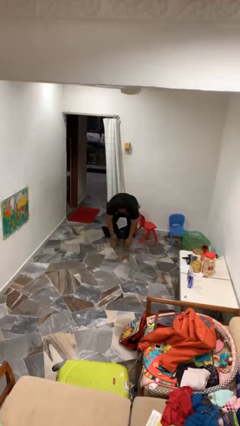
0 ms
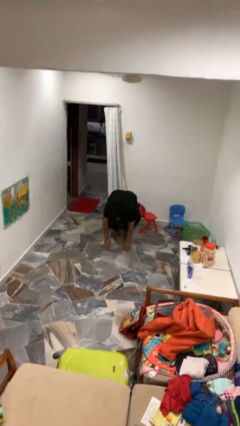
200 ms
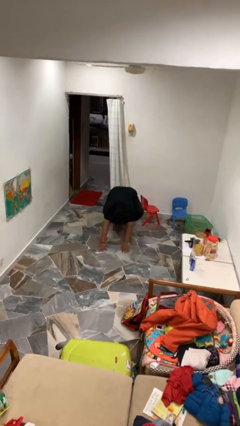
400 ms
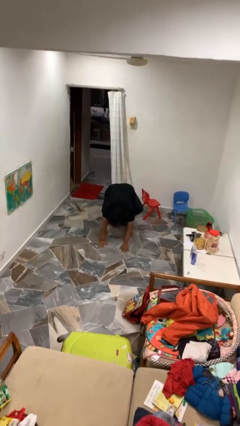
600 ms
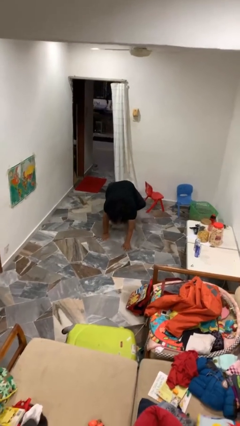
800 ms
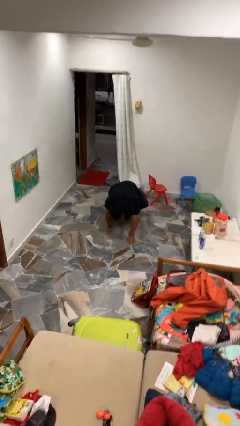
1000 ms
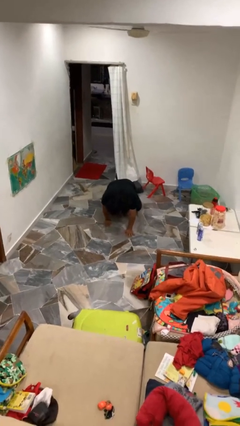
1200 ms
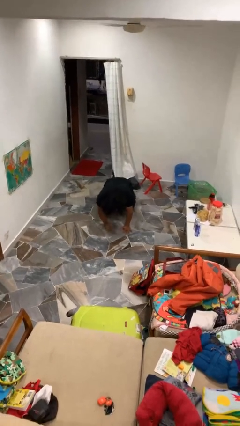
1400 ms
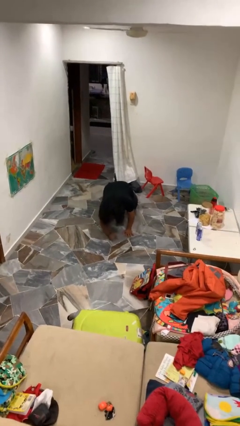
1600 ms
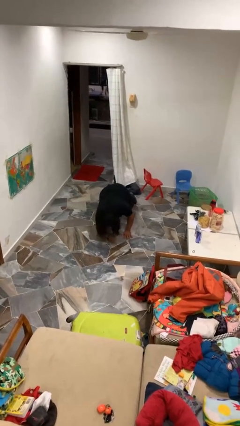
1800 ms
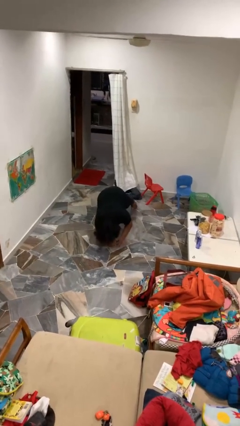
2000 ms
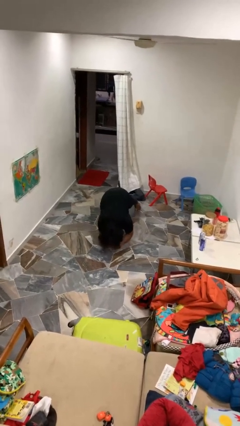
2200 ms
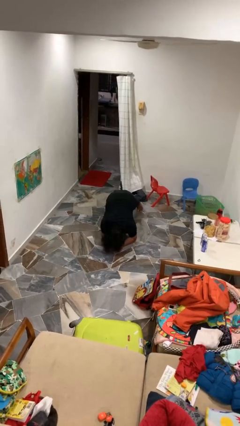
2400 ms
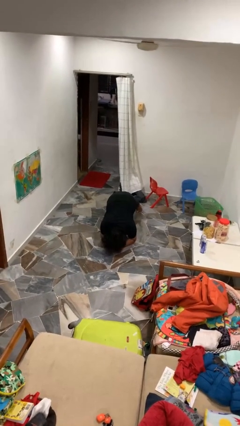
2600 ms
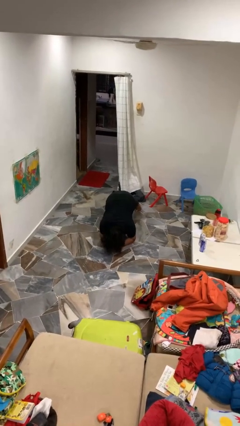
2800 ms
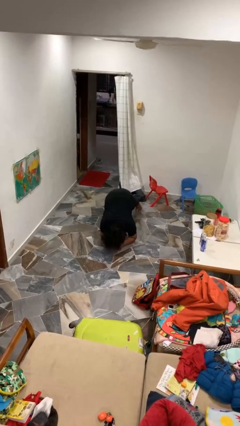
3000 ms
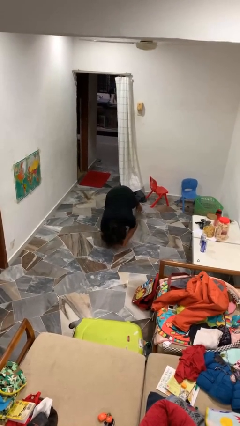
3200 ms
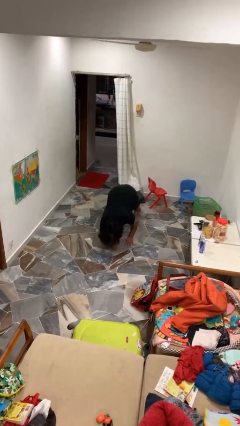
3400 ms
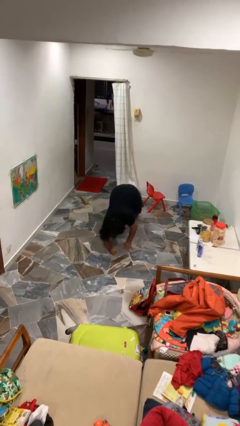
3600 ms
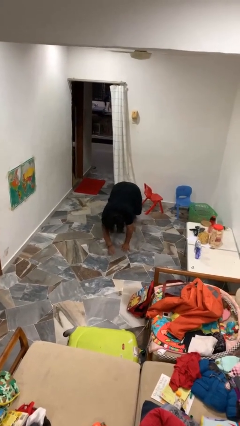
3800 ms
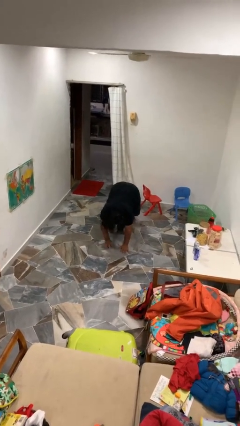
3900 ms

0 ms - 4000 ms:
person exercises with plank

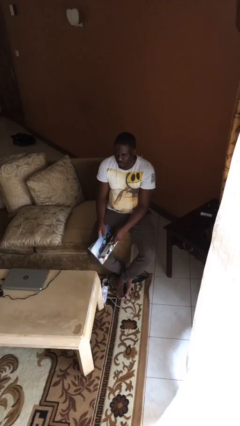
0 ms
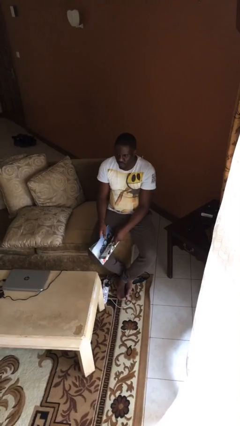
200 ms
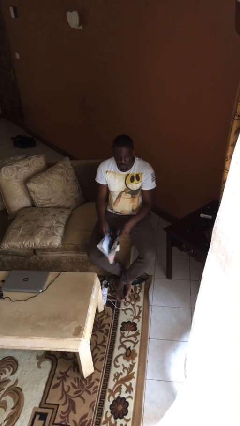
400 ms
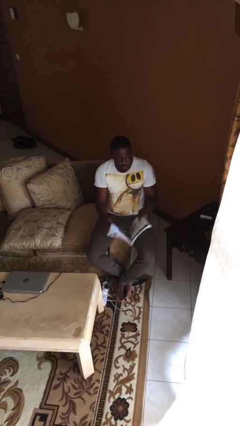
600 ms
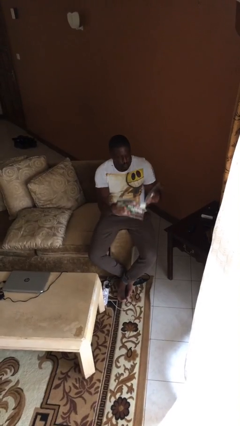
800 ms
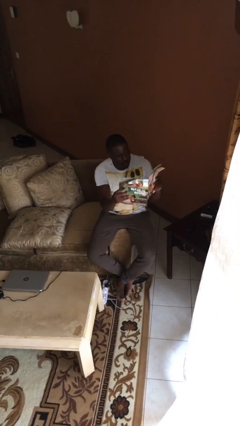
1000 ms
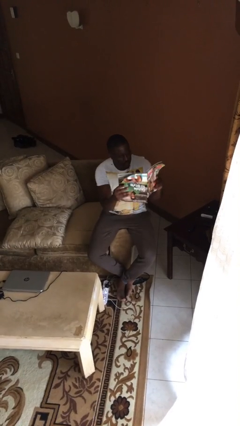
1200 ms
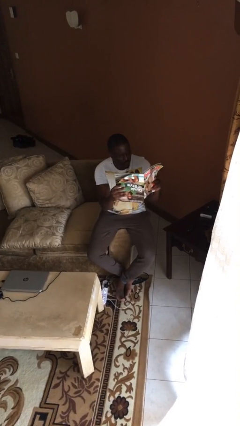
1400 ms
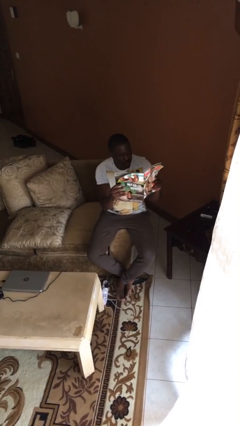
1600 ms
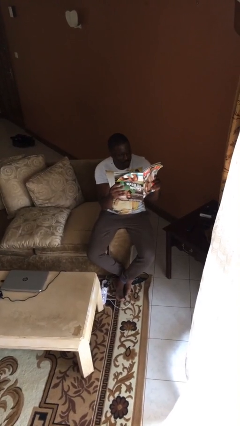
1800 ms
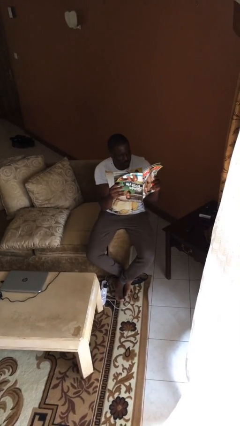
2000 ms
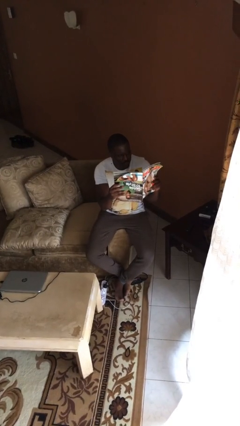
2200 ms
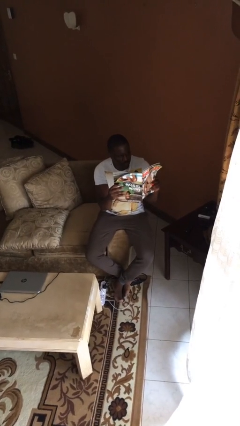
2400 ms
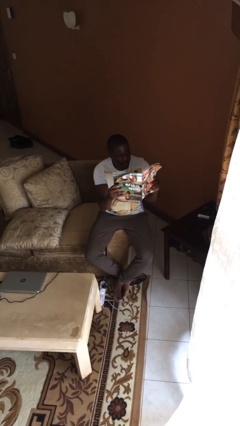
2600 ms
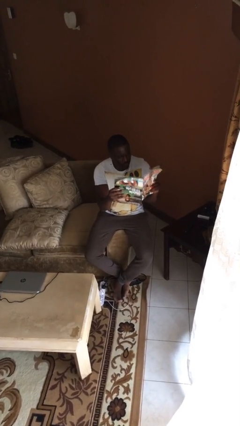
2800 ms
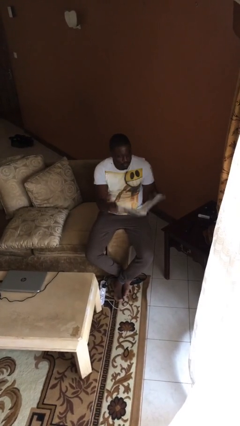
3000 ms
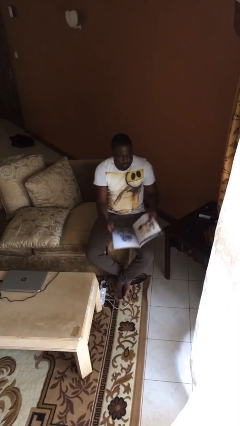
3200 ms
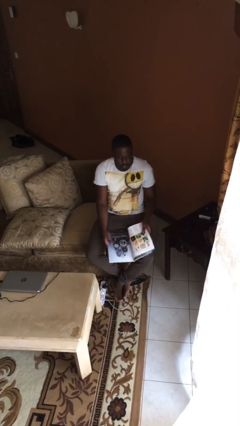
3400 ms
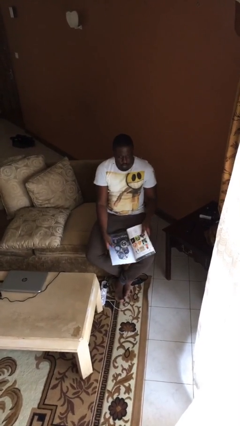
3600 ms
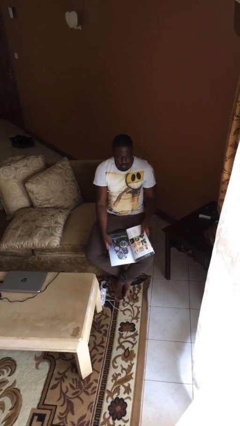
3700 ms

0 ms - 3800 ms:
person reads document

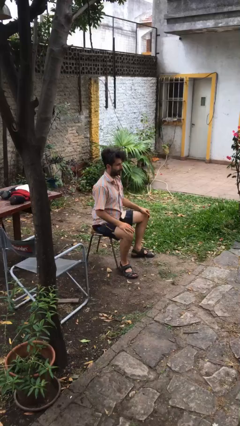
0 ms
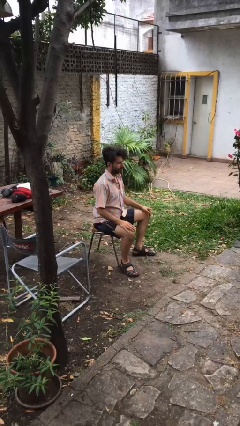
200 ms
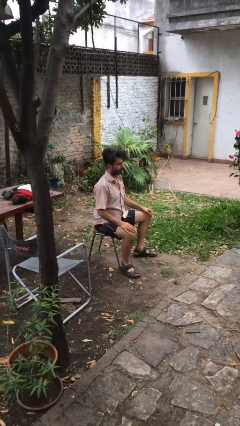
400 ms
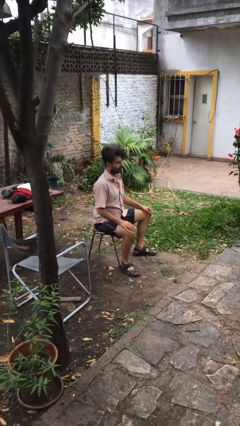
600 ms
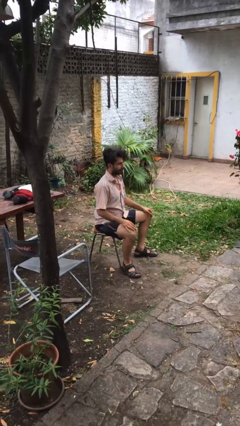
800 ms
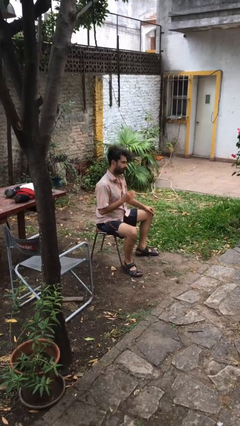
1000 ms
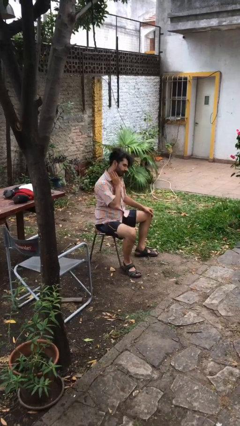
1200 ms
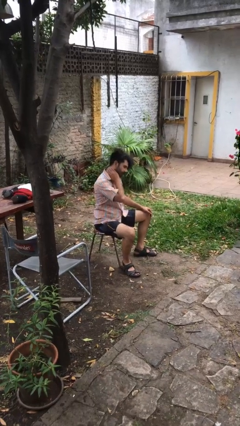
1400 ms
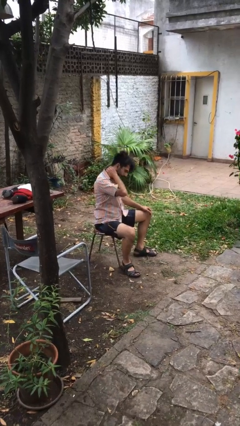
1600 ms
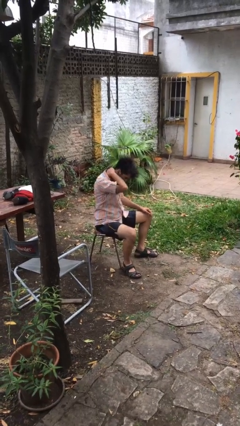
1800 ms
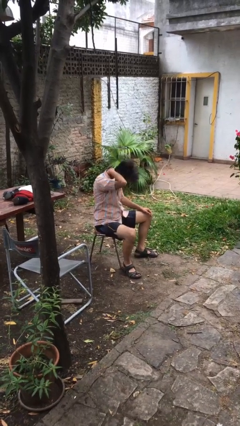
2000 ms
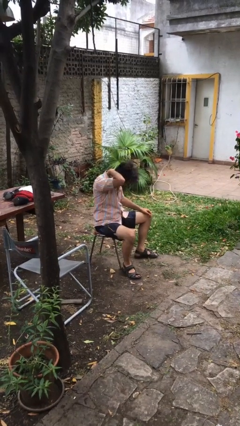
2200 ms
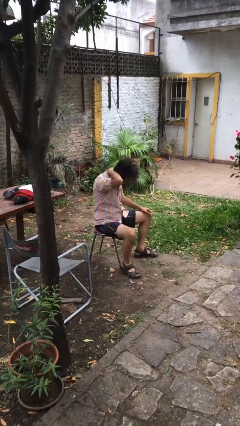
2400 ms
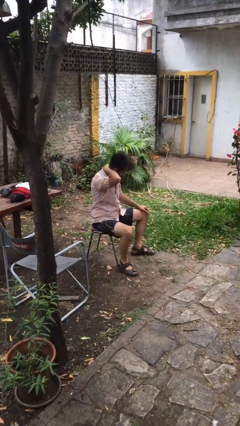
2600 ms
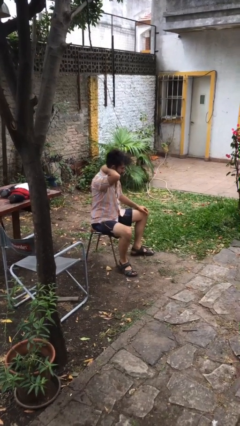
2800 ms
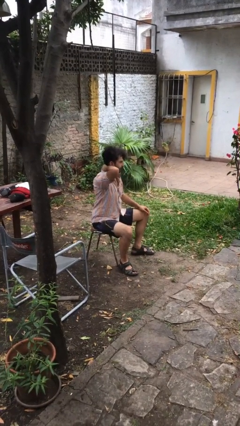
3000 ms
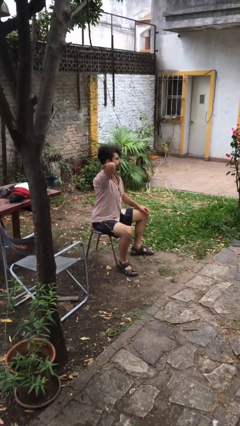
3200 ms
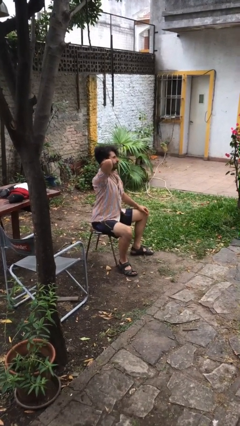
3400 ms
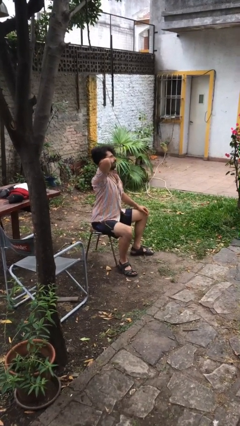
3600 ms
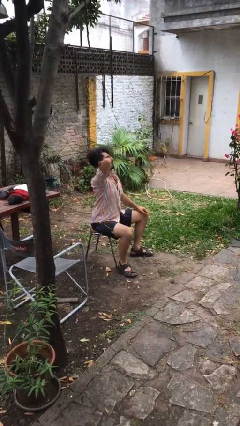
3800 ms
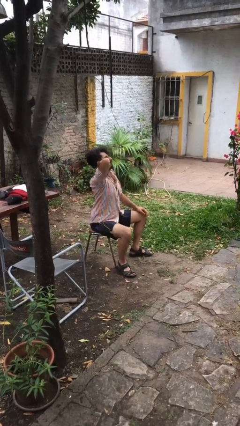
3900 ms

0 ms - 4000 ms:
person rubs neck

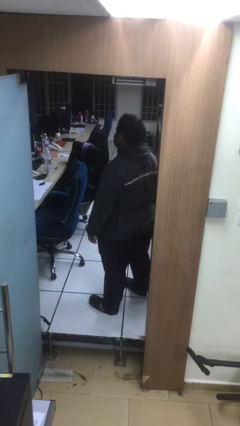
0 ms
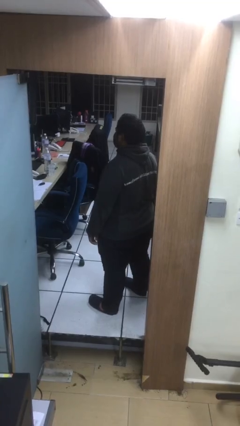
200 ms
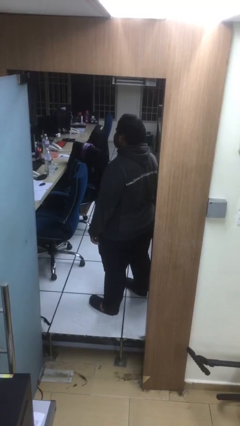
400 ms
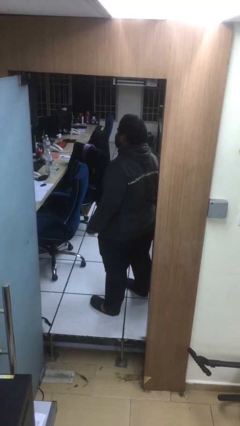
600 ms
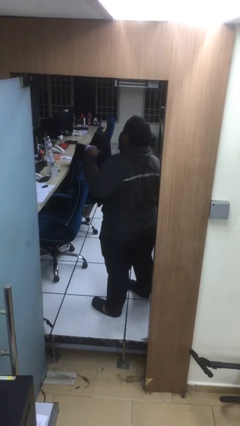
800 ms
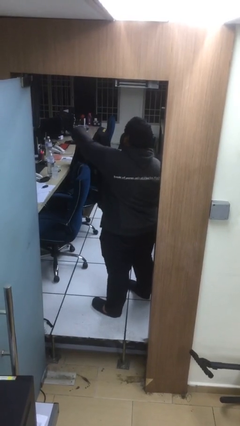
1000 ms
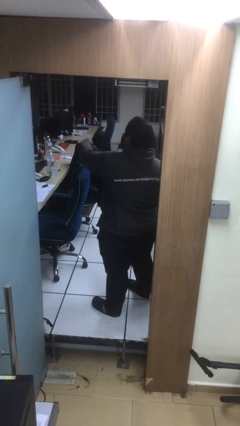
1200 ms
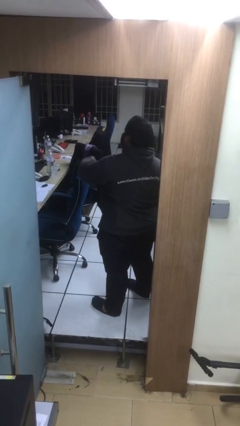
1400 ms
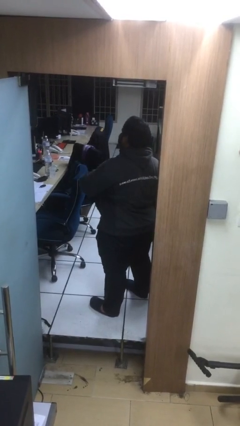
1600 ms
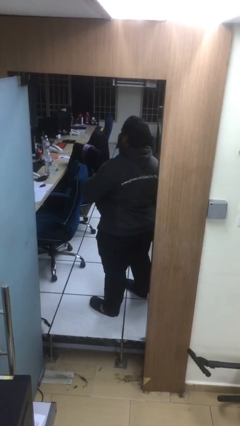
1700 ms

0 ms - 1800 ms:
person punches

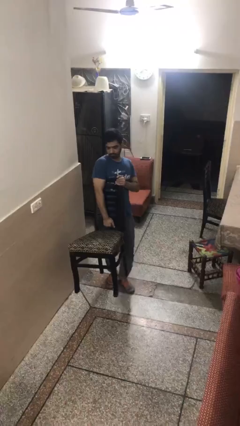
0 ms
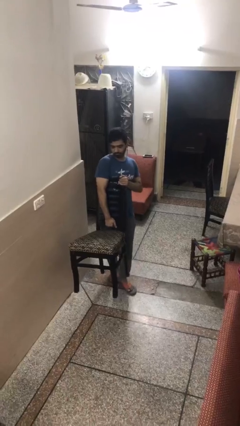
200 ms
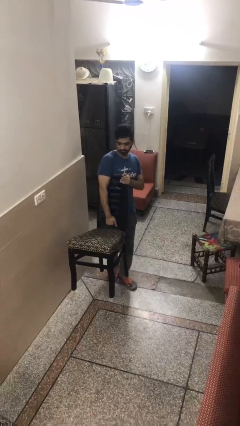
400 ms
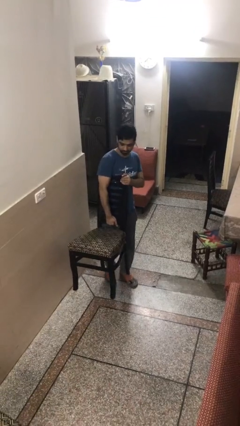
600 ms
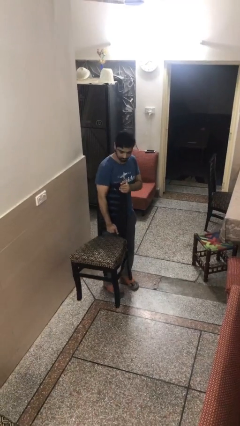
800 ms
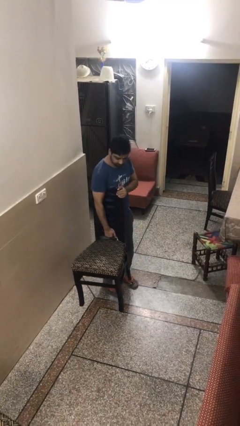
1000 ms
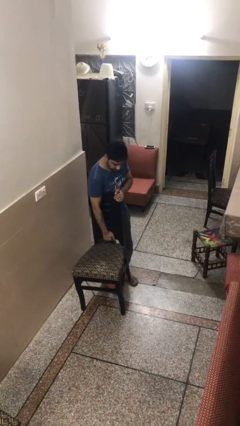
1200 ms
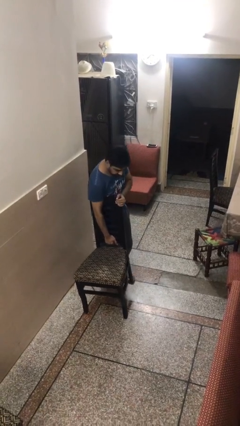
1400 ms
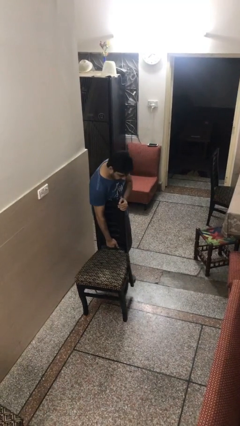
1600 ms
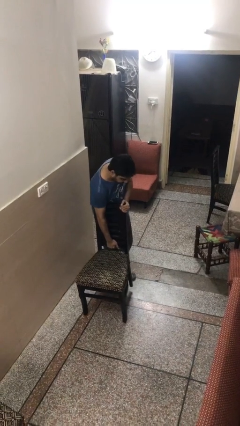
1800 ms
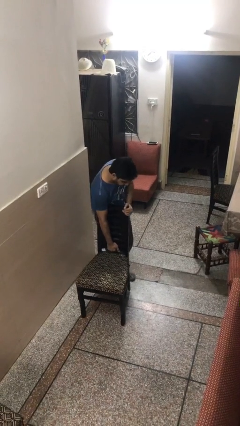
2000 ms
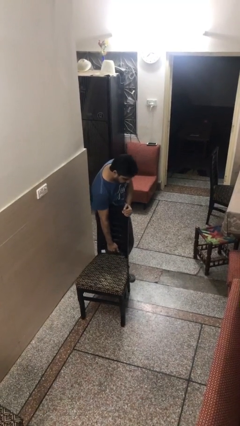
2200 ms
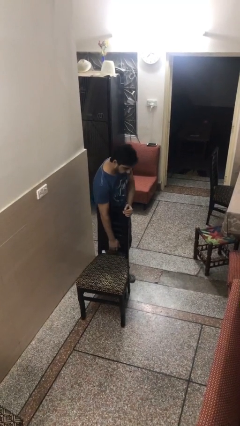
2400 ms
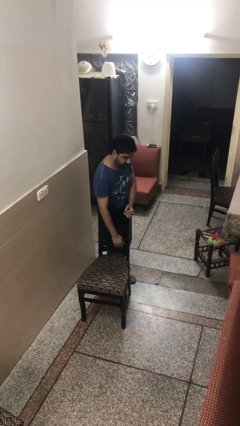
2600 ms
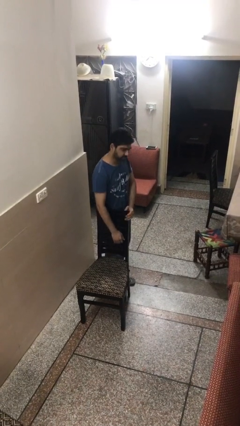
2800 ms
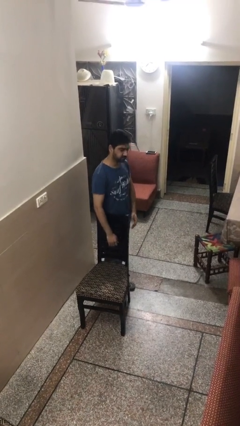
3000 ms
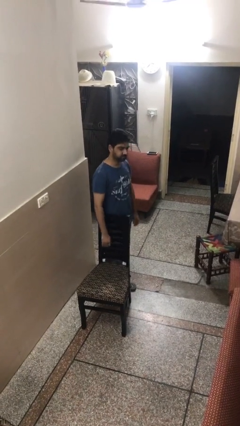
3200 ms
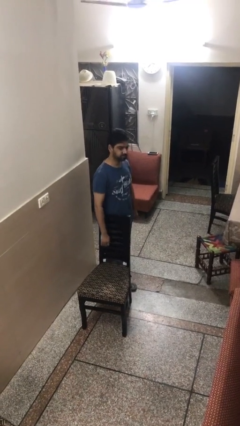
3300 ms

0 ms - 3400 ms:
person puts down object on floor

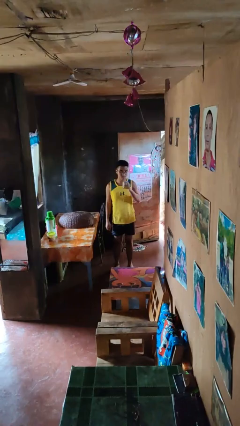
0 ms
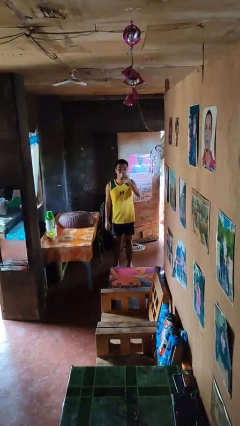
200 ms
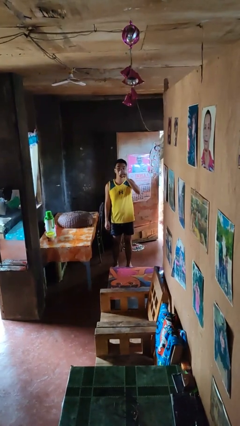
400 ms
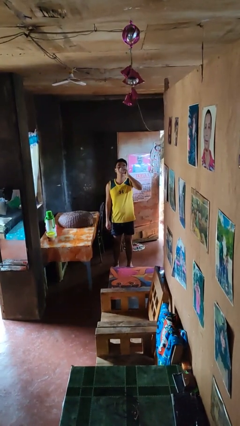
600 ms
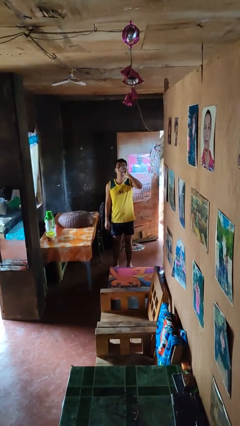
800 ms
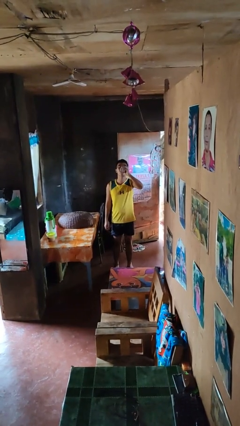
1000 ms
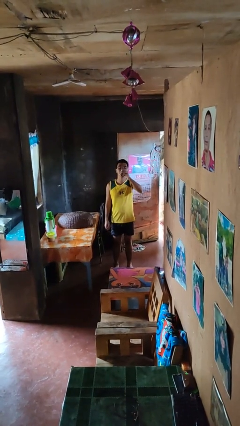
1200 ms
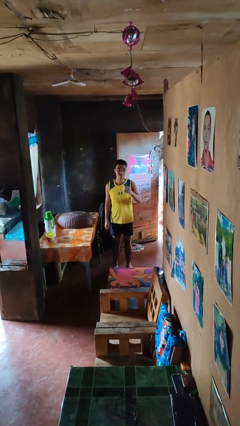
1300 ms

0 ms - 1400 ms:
person drinks from beverage can
